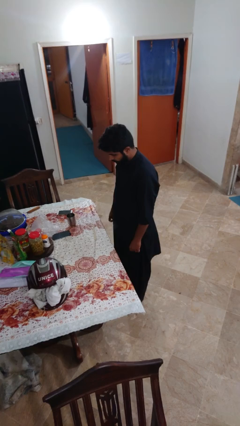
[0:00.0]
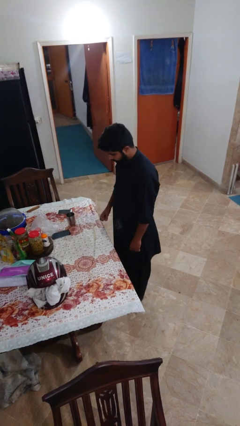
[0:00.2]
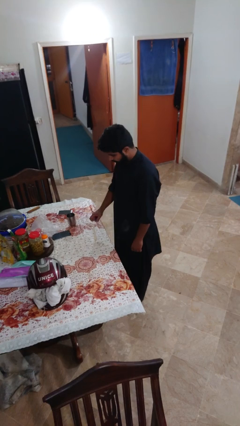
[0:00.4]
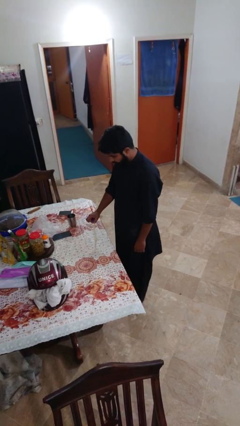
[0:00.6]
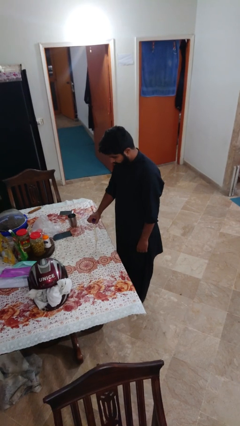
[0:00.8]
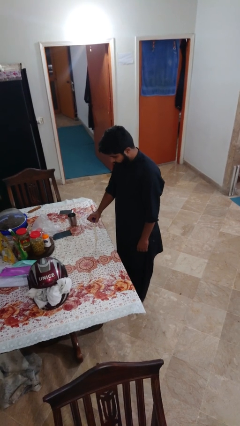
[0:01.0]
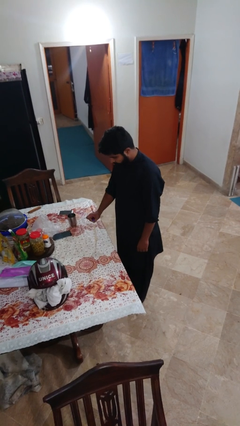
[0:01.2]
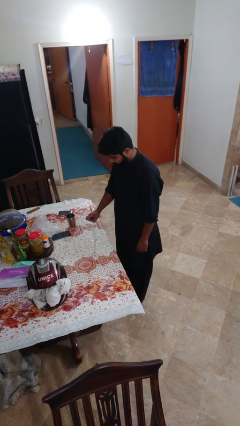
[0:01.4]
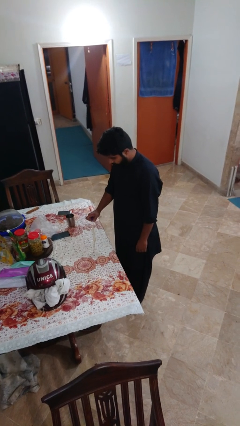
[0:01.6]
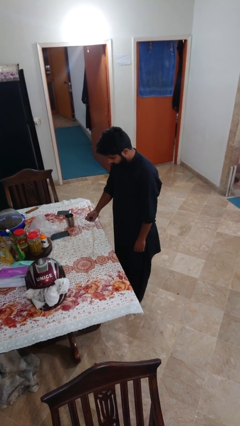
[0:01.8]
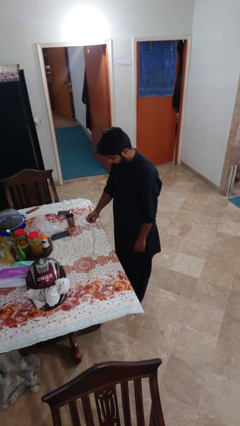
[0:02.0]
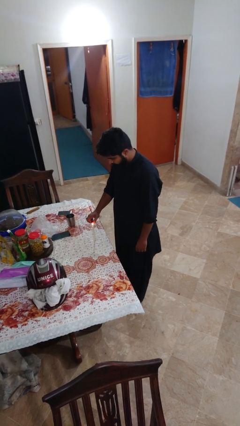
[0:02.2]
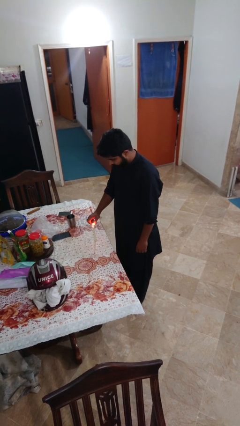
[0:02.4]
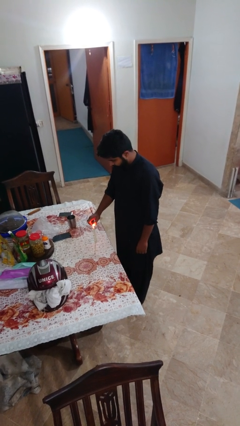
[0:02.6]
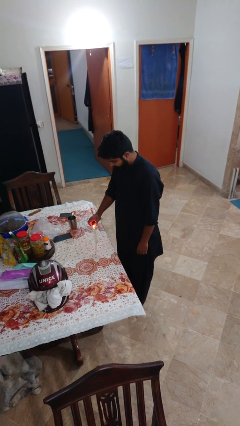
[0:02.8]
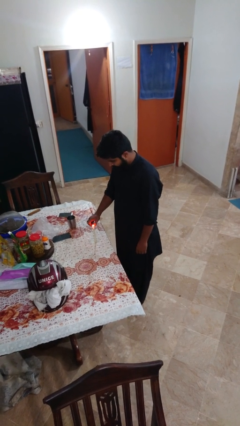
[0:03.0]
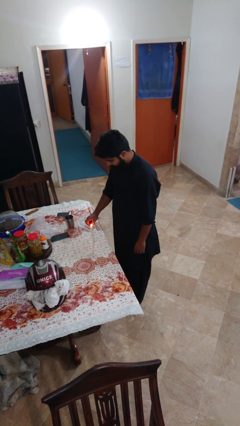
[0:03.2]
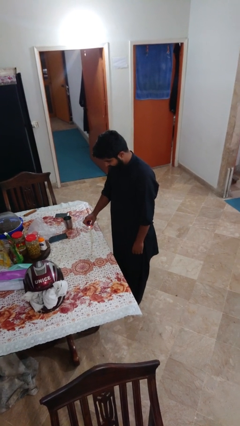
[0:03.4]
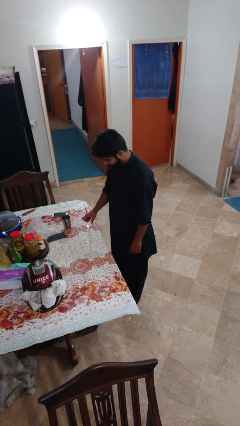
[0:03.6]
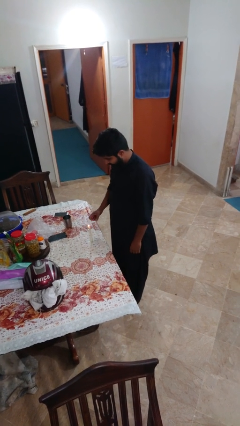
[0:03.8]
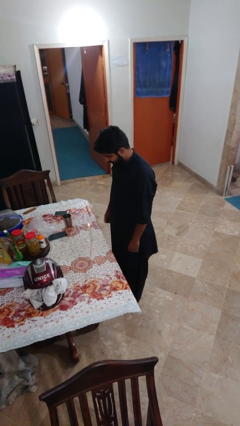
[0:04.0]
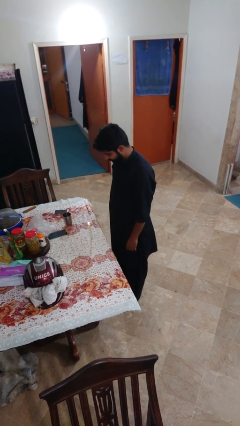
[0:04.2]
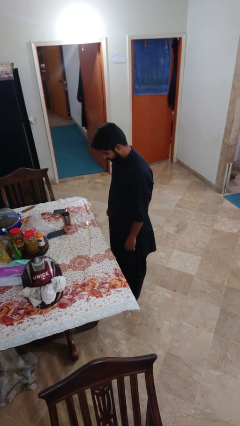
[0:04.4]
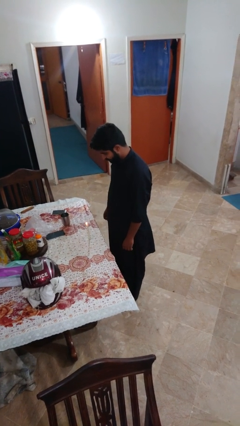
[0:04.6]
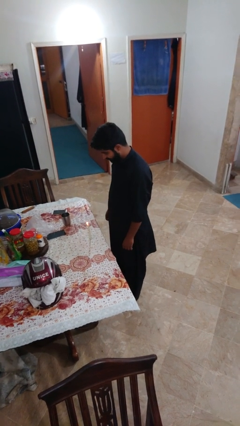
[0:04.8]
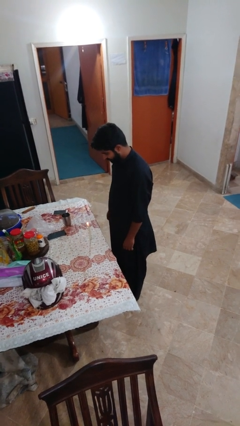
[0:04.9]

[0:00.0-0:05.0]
person lights candle

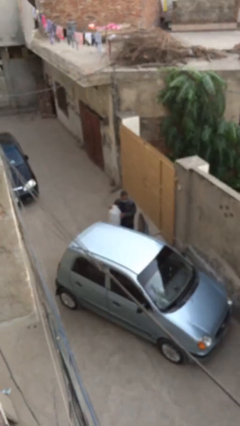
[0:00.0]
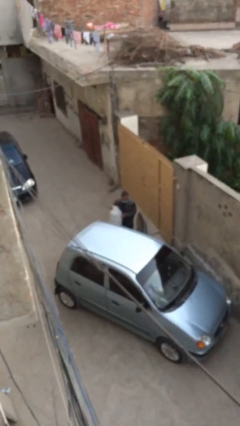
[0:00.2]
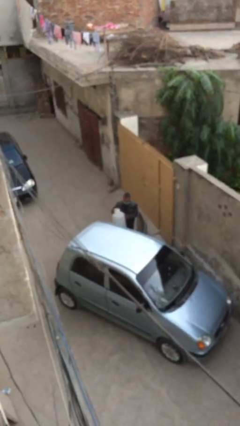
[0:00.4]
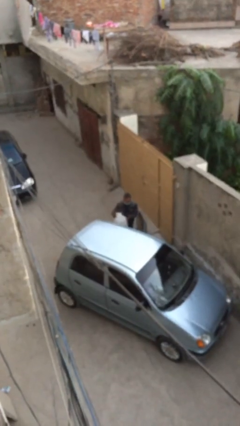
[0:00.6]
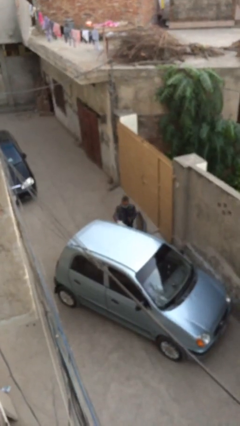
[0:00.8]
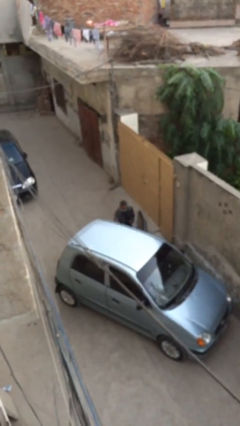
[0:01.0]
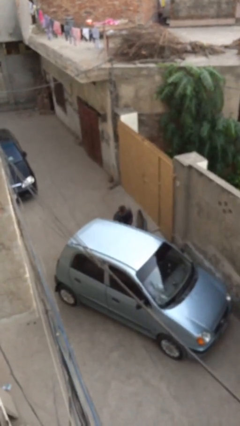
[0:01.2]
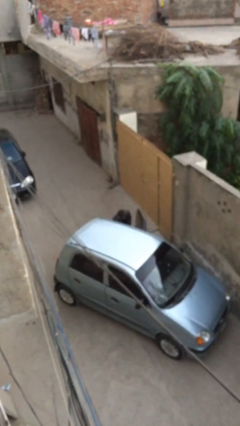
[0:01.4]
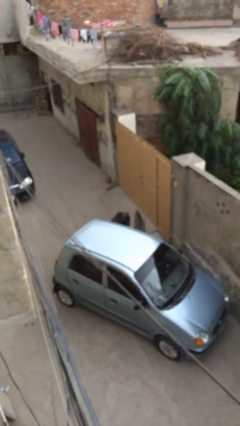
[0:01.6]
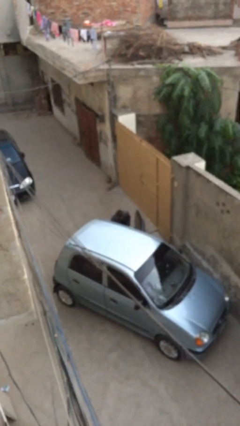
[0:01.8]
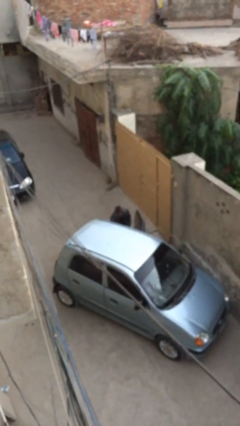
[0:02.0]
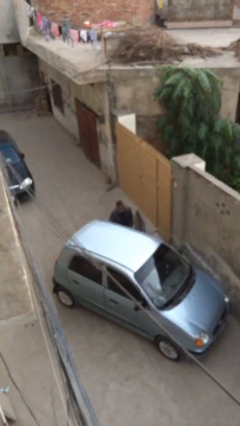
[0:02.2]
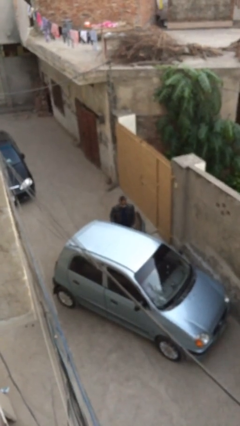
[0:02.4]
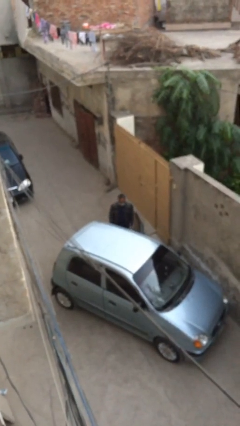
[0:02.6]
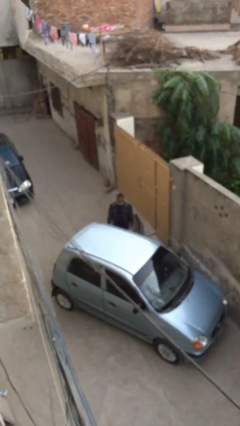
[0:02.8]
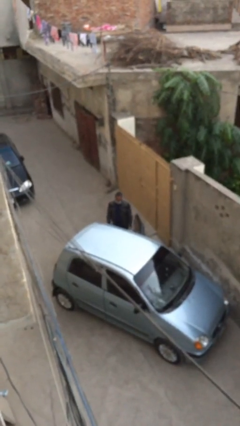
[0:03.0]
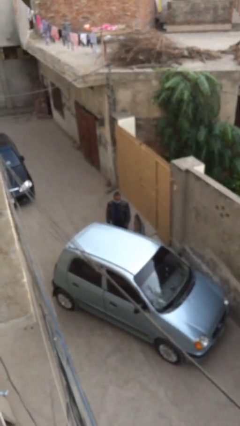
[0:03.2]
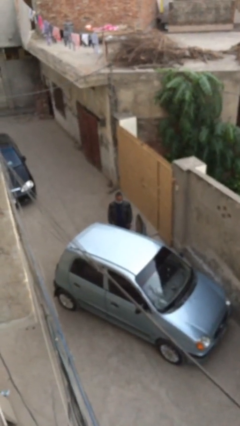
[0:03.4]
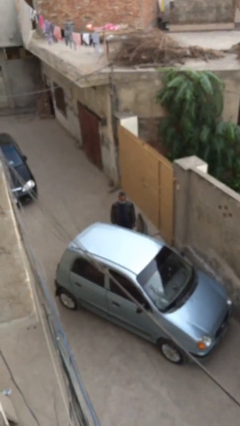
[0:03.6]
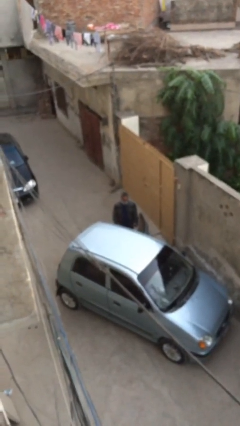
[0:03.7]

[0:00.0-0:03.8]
person loads car

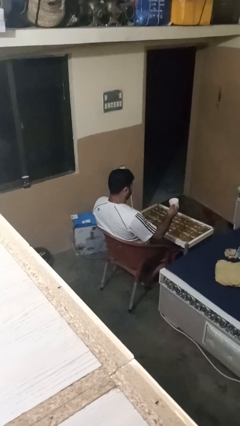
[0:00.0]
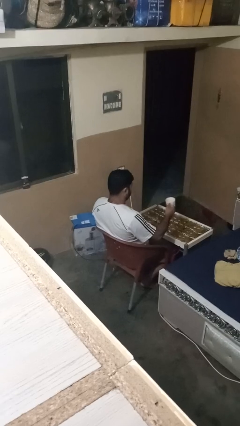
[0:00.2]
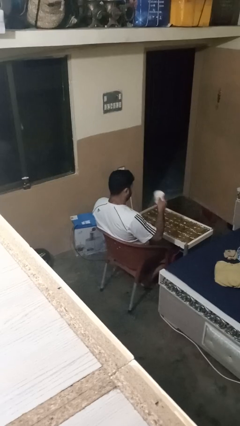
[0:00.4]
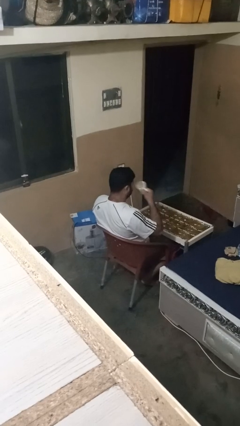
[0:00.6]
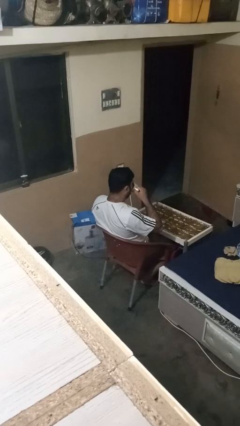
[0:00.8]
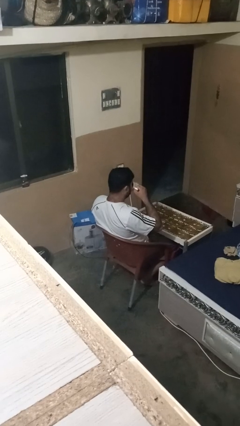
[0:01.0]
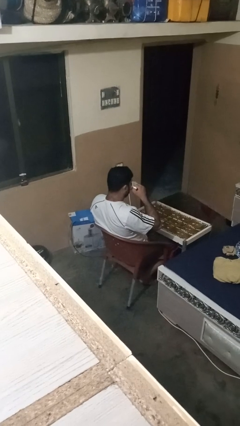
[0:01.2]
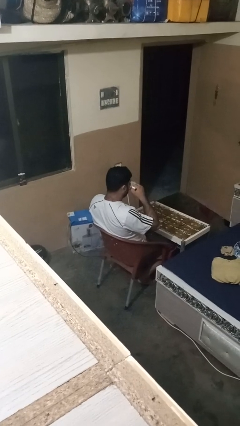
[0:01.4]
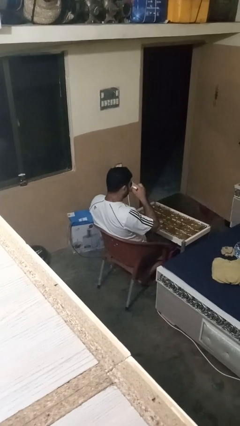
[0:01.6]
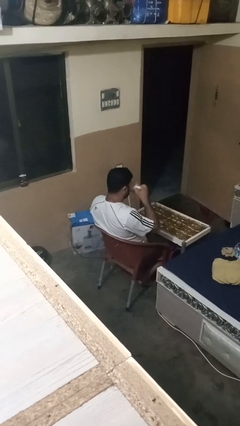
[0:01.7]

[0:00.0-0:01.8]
person drinks from mug

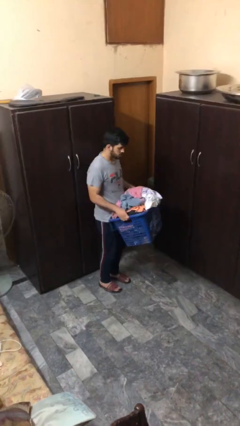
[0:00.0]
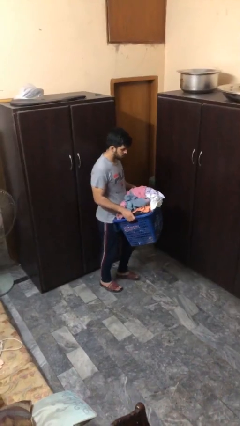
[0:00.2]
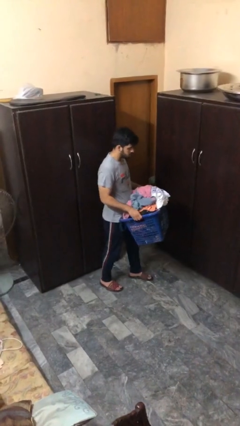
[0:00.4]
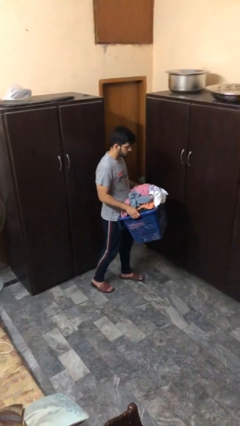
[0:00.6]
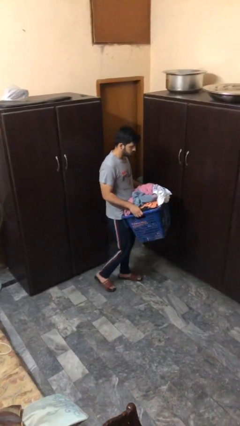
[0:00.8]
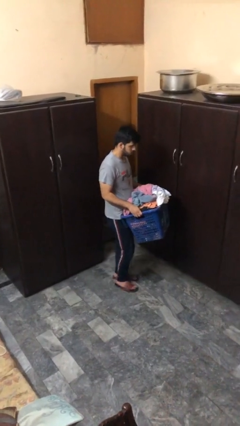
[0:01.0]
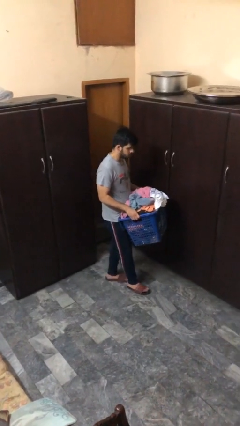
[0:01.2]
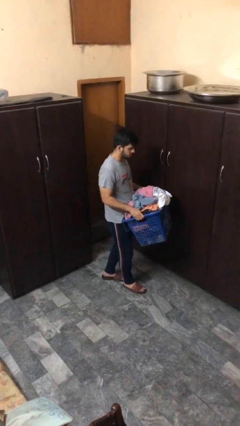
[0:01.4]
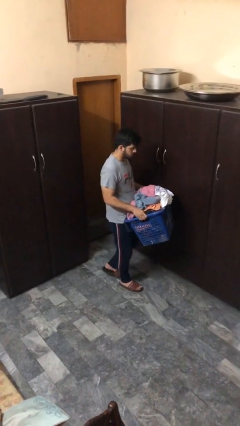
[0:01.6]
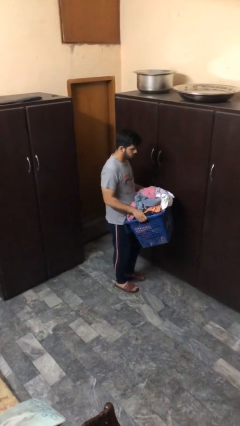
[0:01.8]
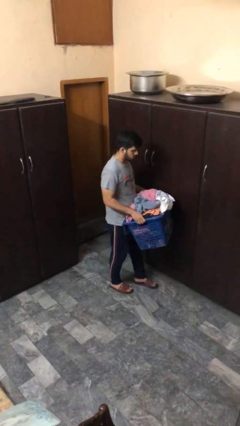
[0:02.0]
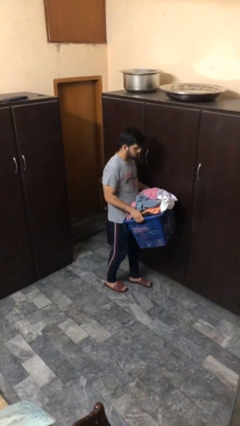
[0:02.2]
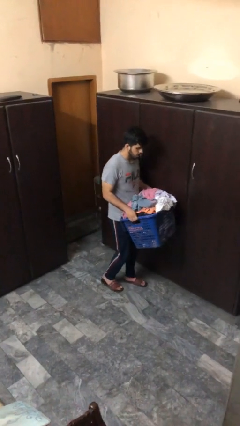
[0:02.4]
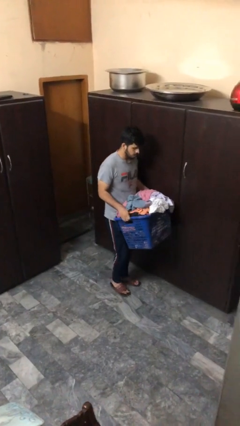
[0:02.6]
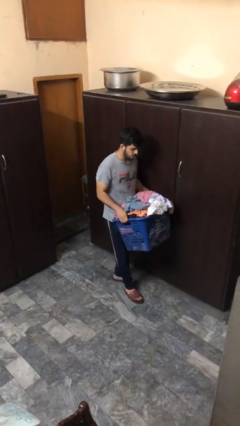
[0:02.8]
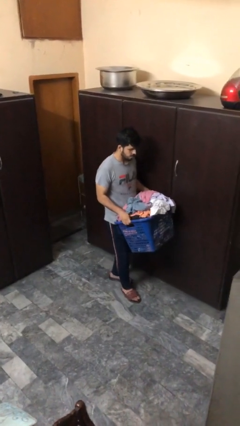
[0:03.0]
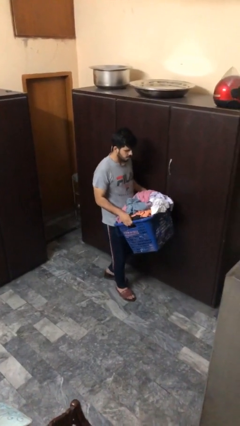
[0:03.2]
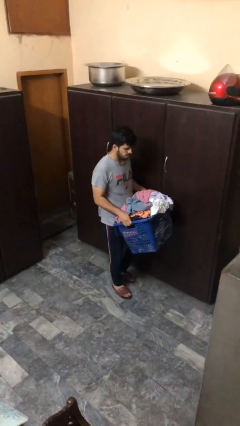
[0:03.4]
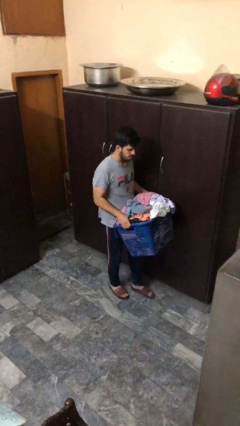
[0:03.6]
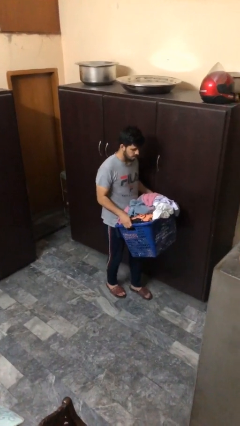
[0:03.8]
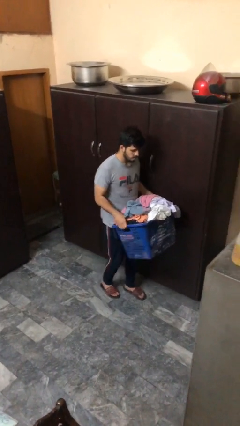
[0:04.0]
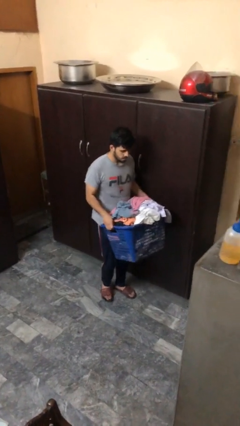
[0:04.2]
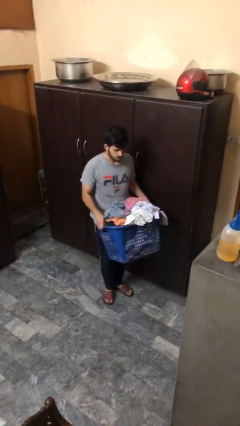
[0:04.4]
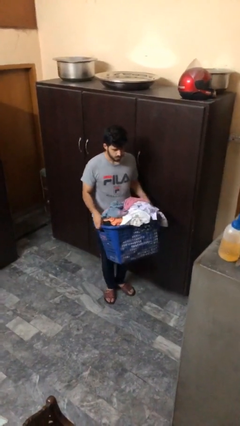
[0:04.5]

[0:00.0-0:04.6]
person carries laundry basket

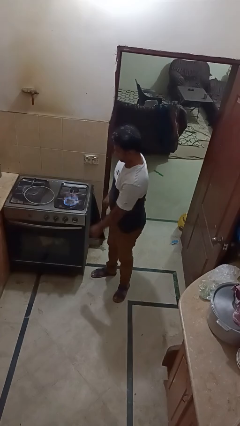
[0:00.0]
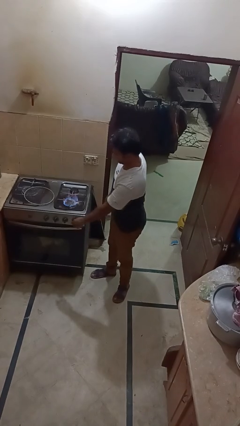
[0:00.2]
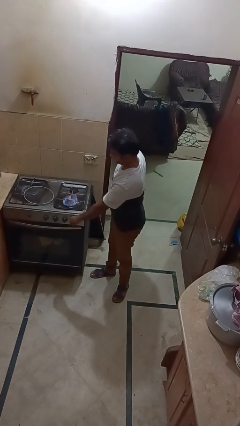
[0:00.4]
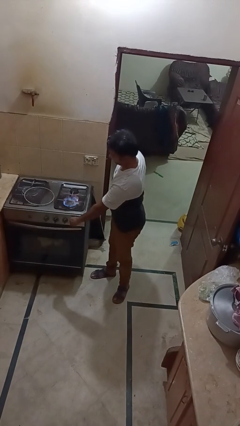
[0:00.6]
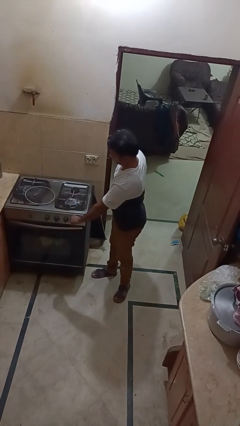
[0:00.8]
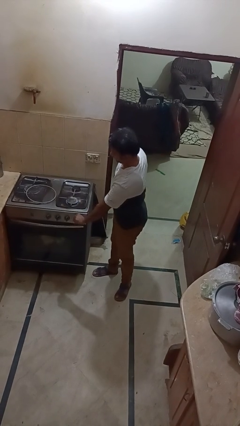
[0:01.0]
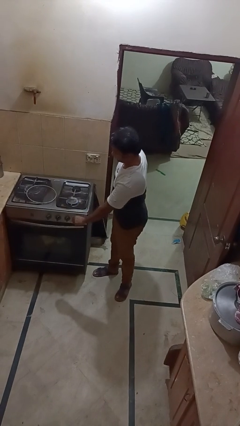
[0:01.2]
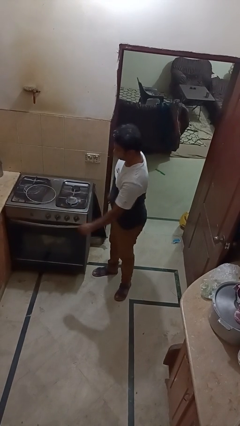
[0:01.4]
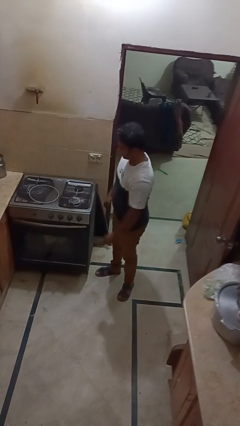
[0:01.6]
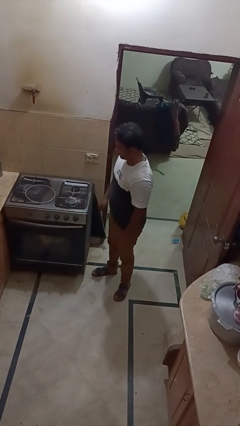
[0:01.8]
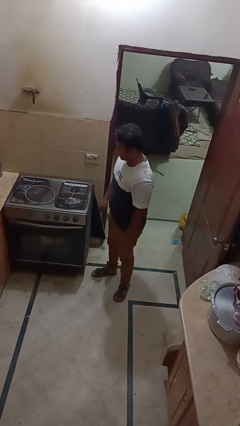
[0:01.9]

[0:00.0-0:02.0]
person turns off stovetop

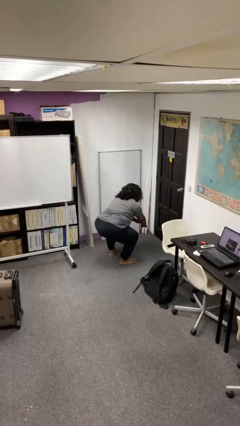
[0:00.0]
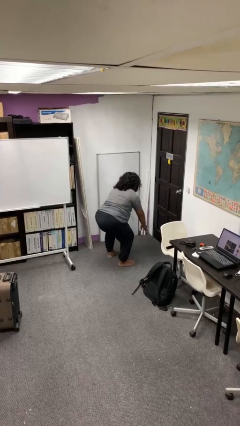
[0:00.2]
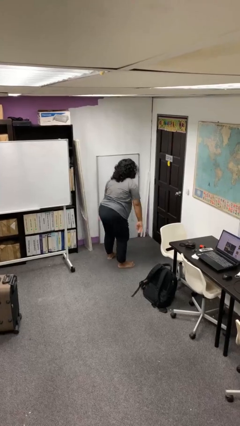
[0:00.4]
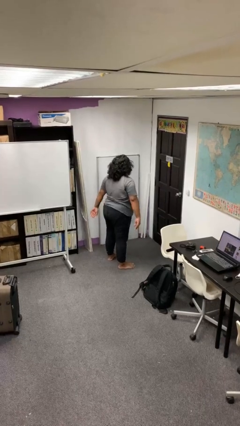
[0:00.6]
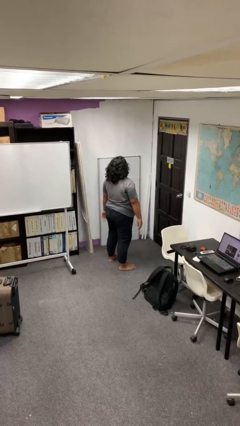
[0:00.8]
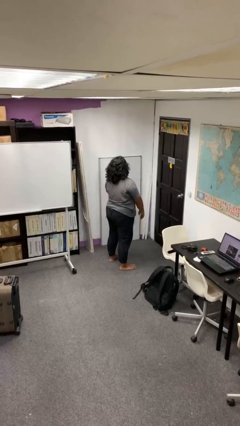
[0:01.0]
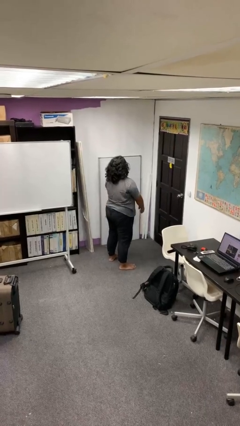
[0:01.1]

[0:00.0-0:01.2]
person stands up
